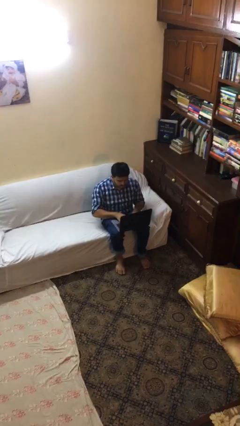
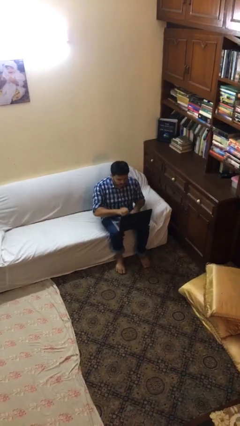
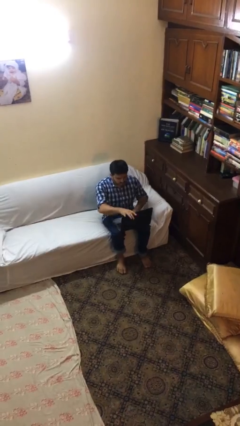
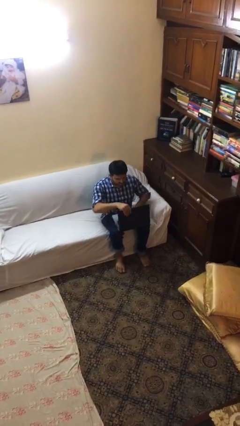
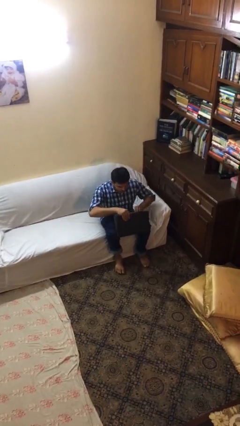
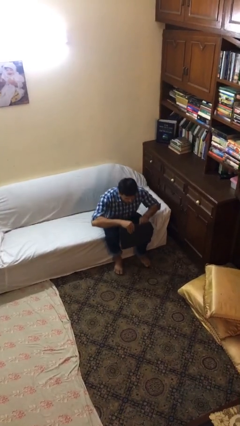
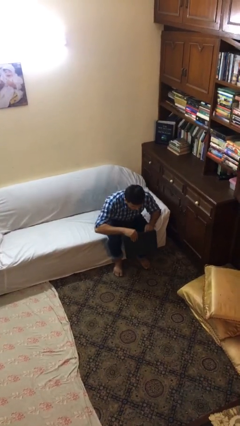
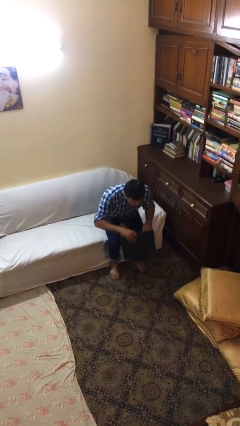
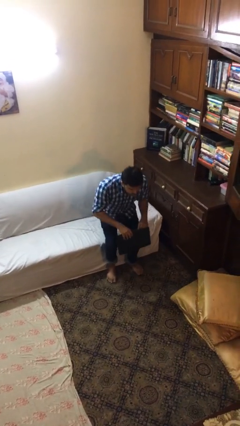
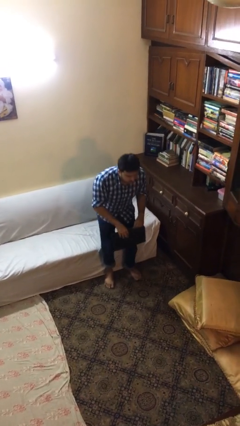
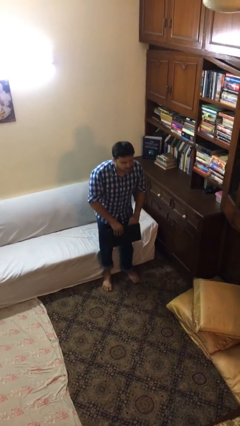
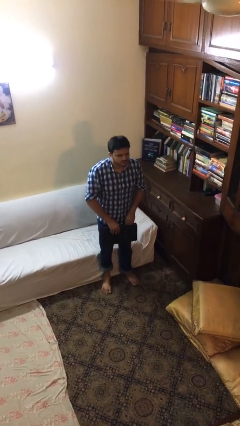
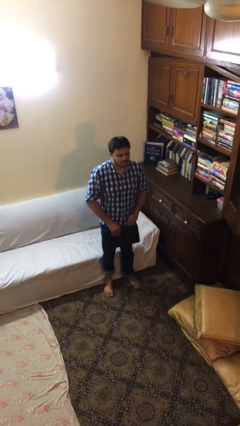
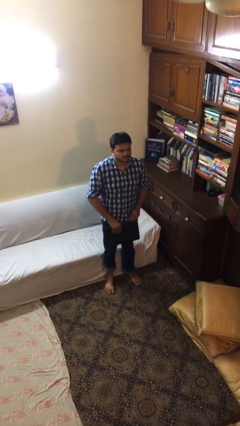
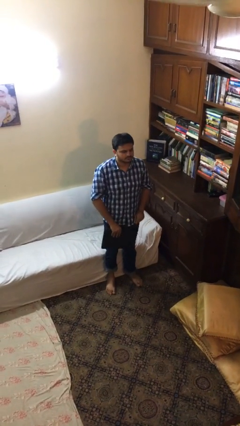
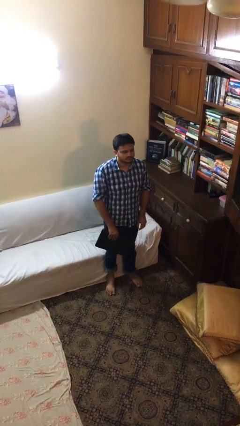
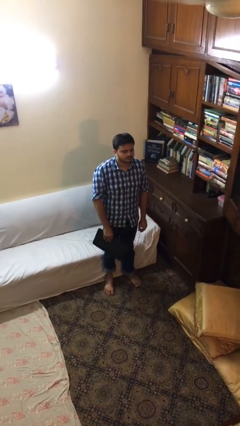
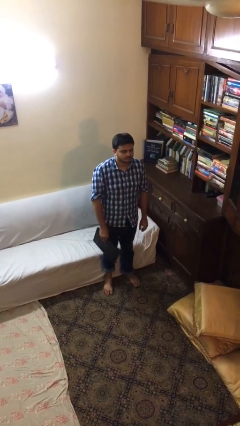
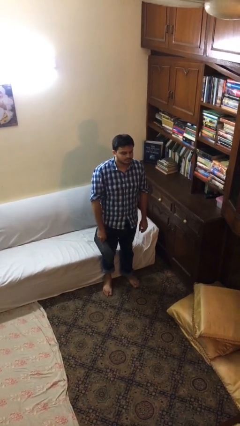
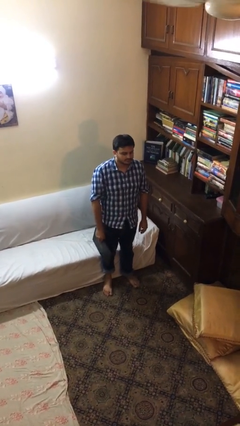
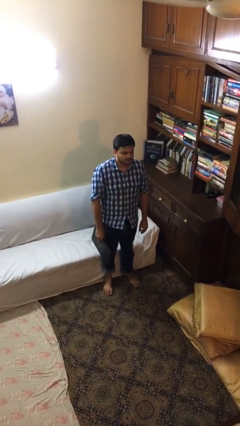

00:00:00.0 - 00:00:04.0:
person stands up

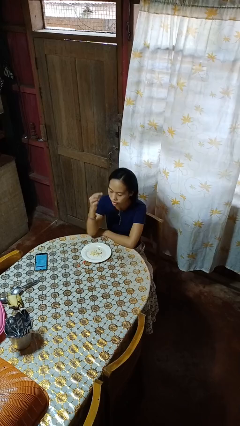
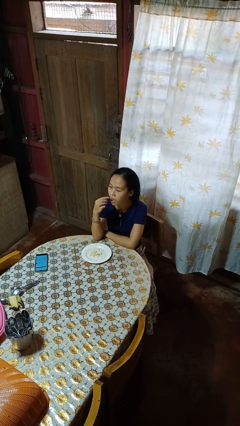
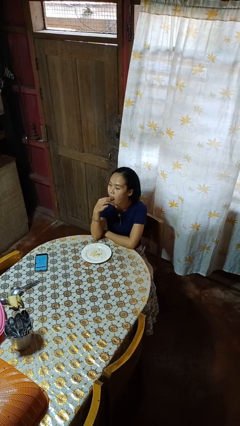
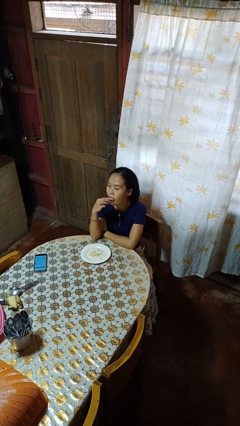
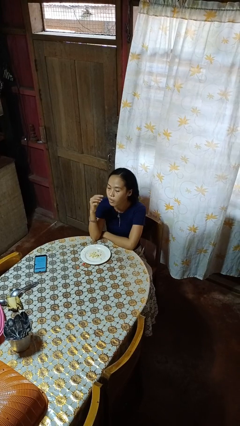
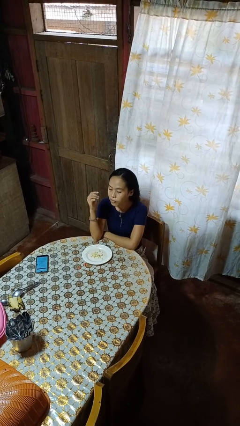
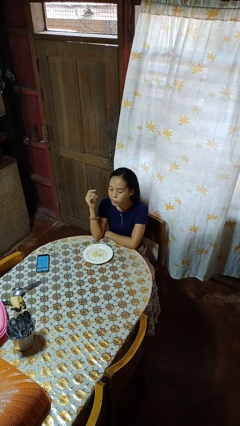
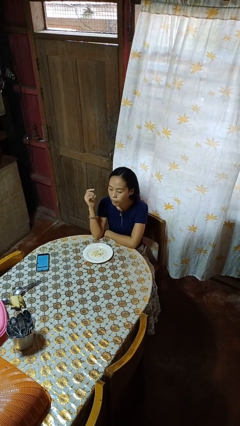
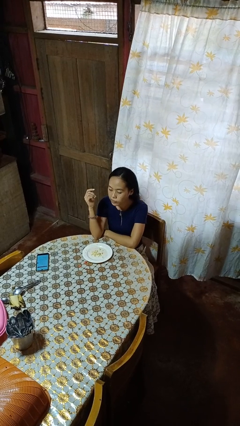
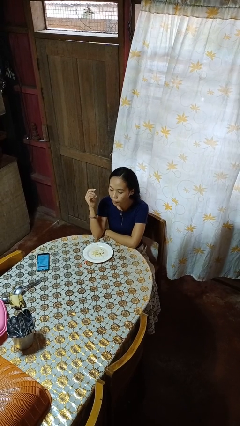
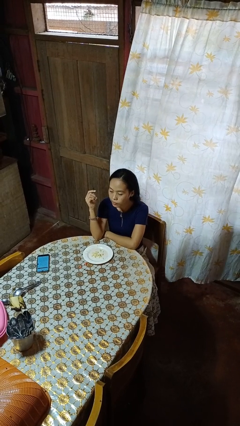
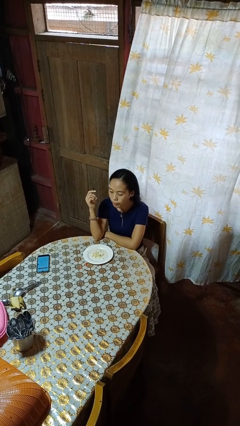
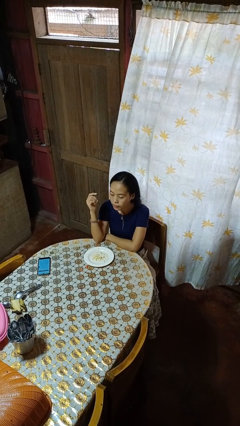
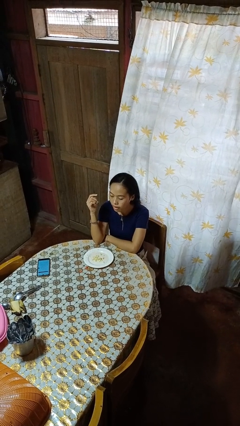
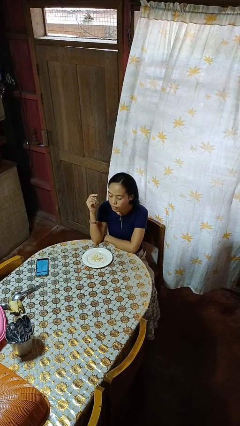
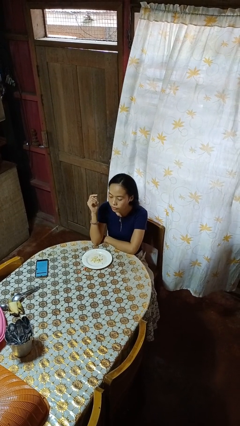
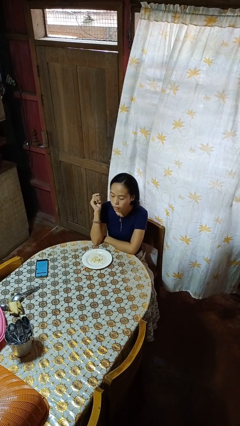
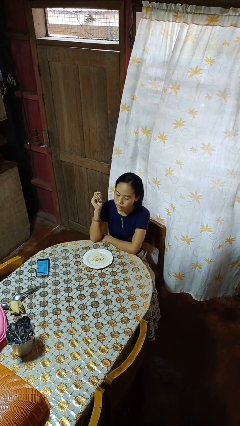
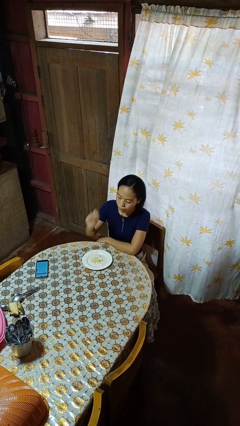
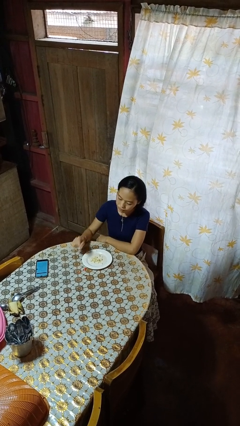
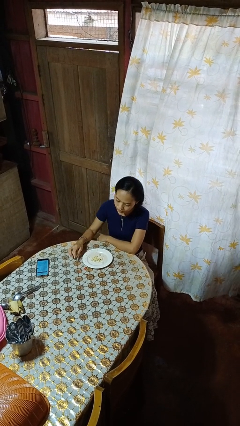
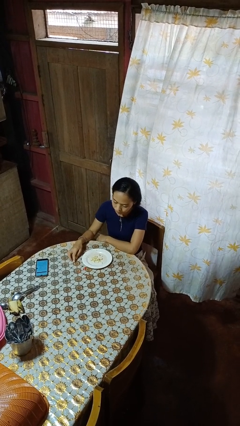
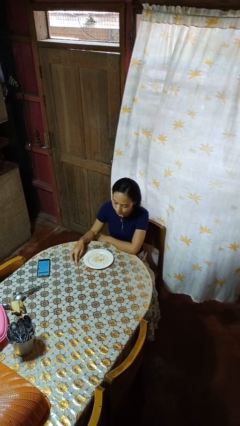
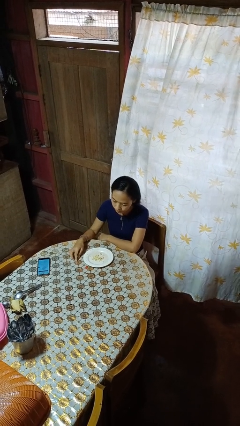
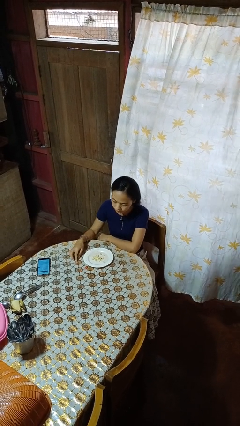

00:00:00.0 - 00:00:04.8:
person eats with hands

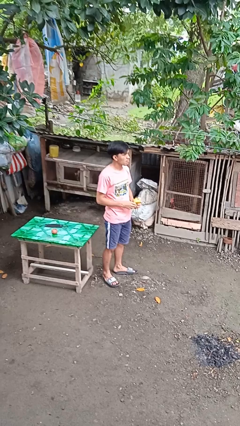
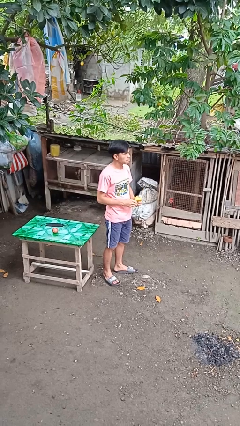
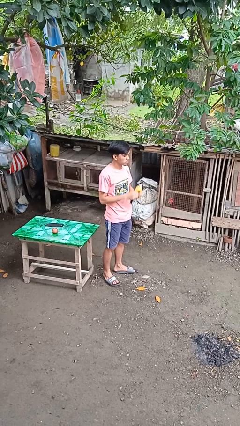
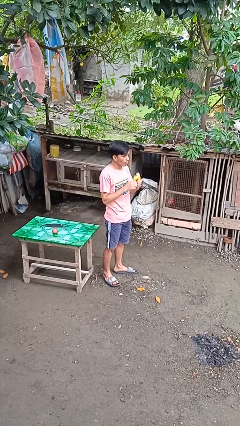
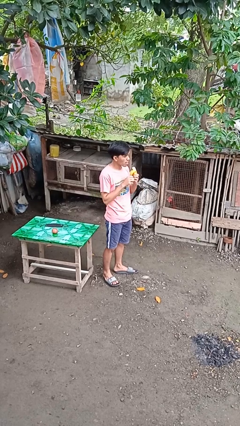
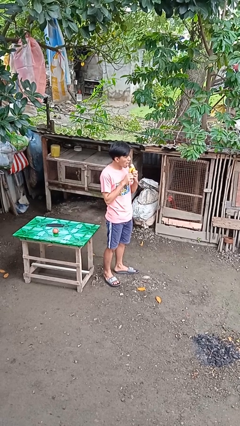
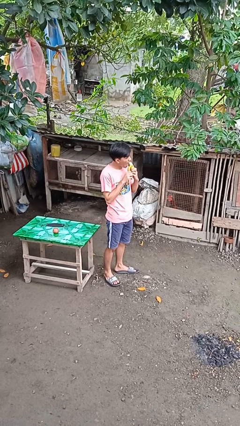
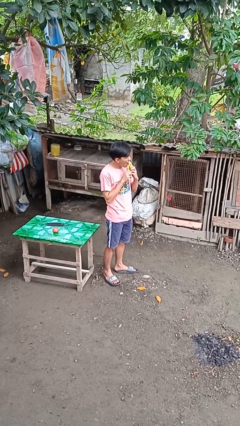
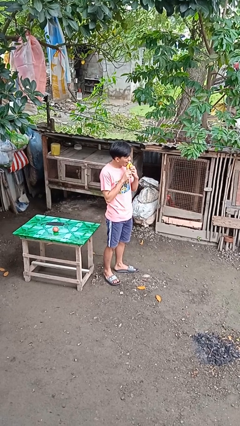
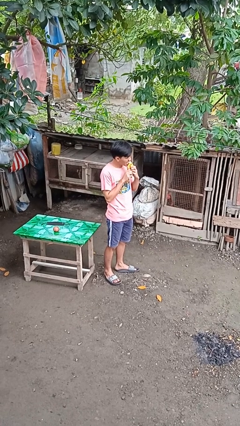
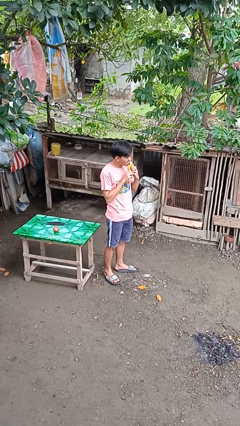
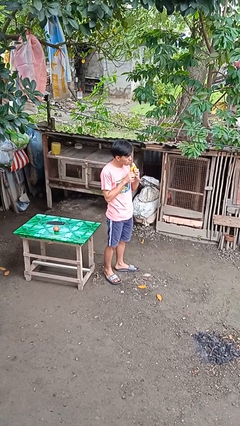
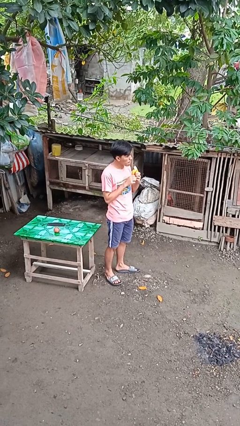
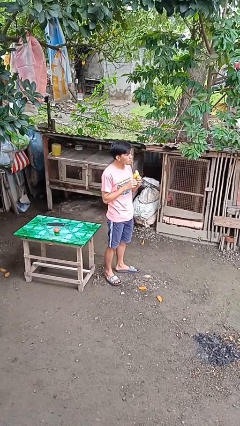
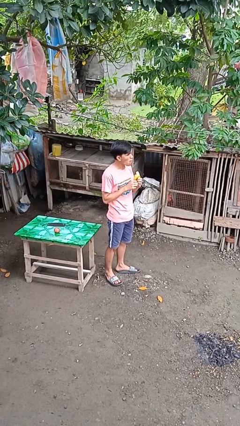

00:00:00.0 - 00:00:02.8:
person eats banana

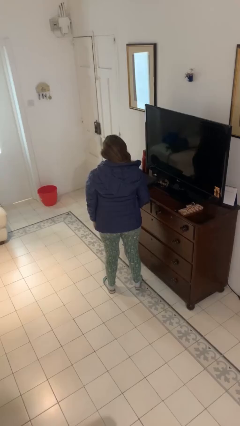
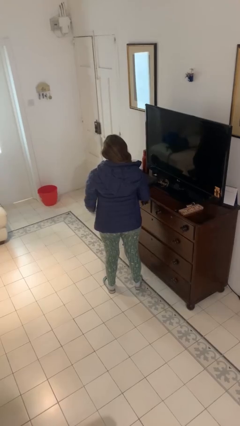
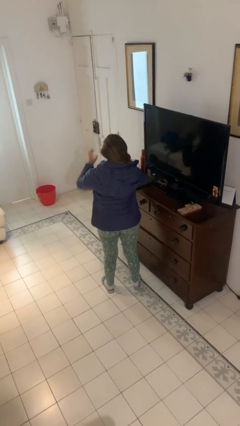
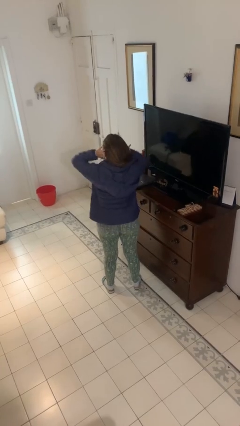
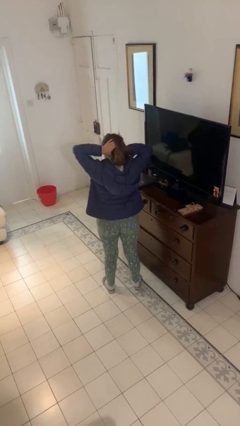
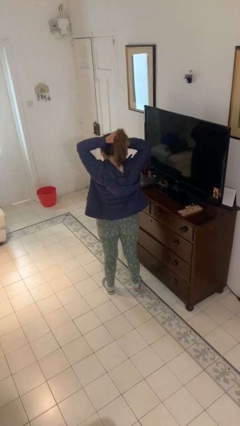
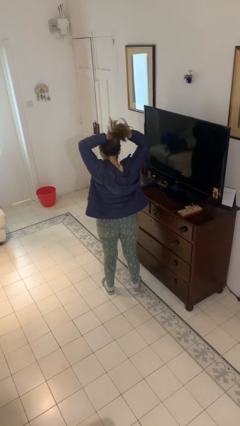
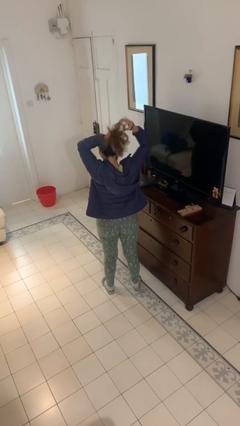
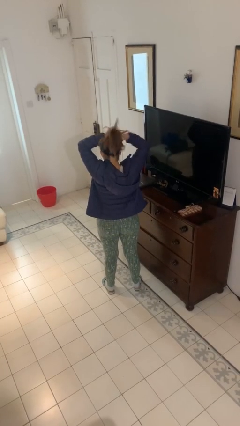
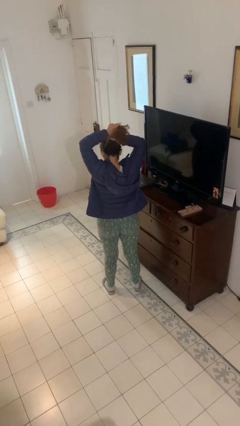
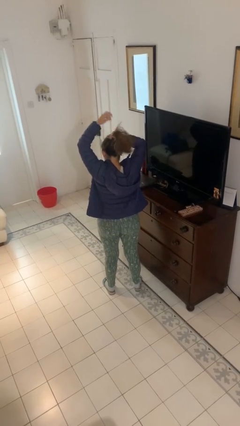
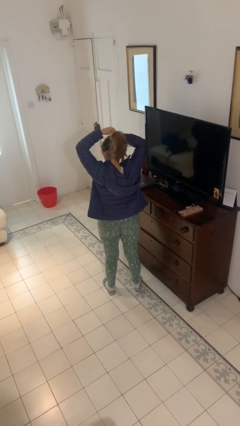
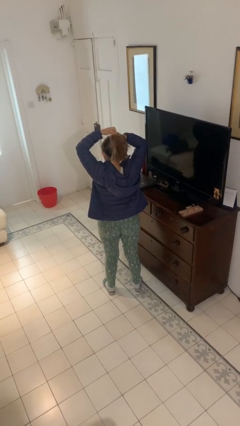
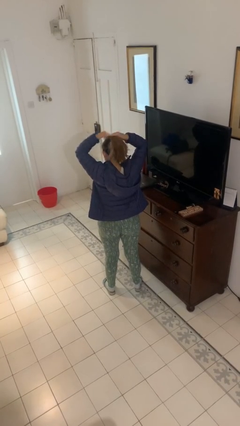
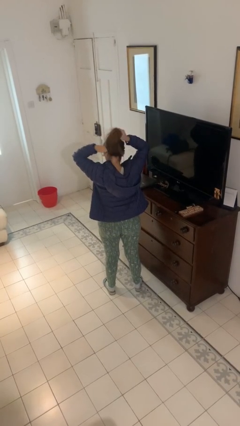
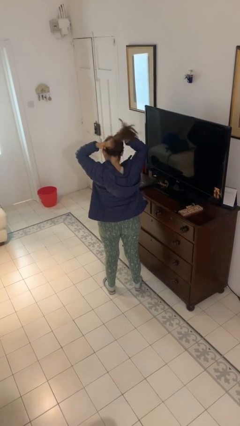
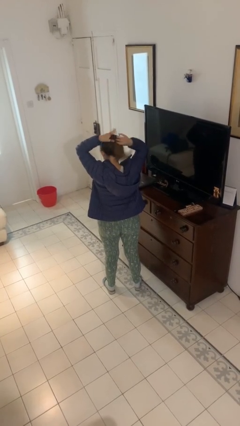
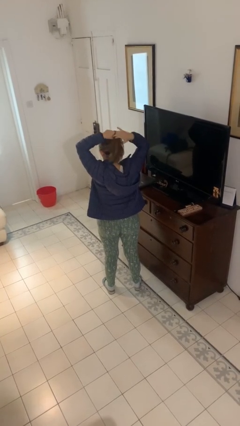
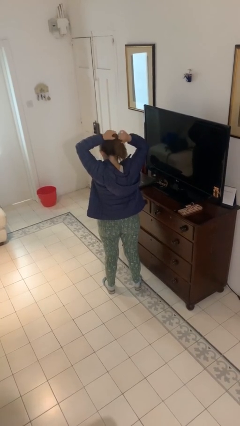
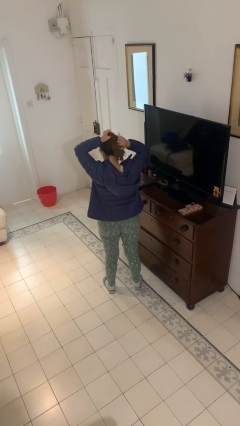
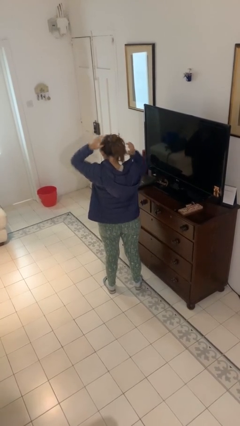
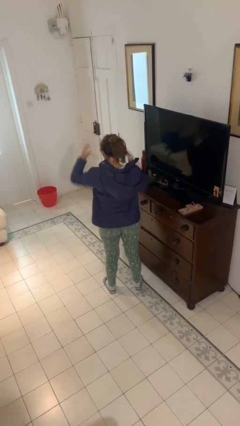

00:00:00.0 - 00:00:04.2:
person puts hair in ponytail

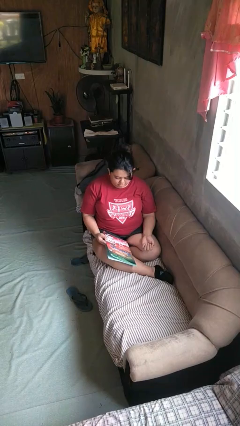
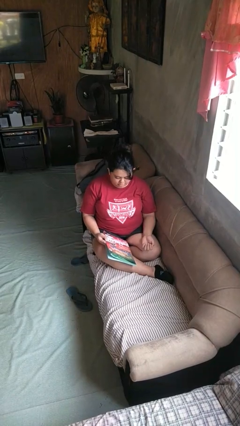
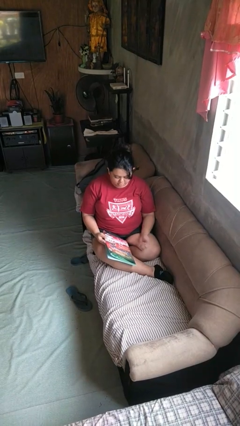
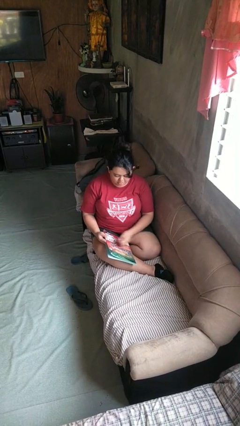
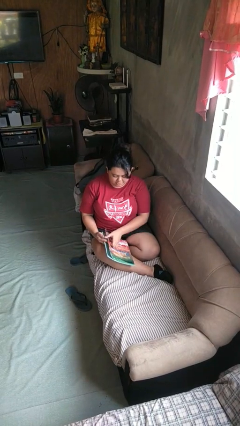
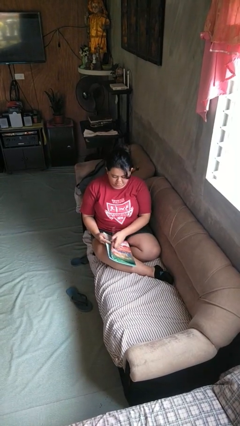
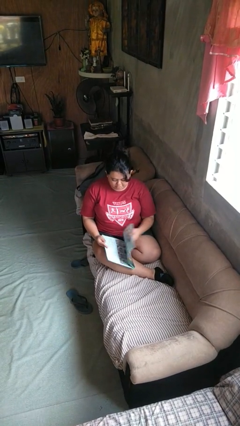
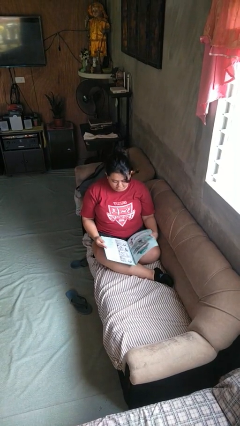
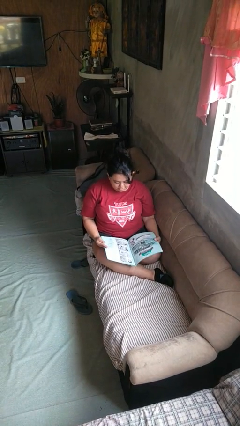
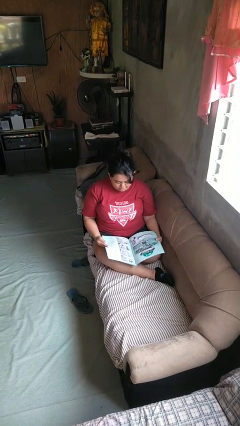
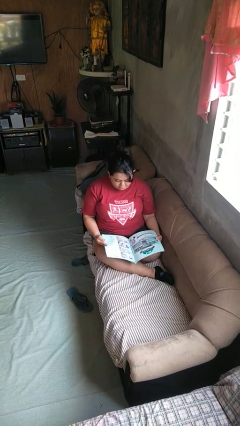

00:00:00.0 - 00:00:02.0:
person reads magazine
